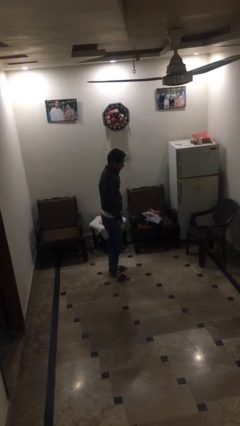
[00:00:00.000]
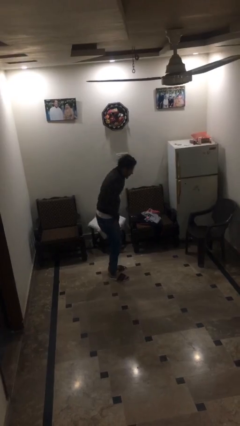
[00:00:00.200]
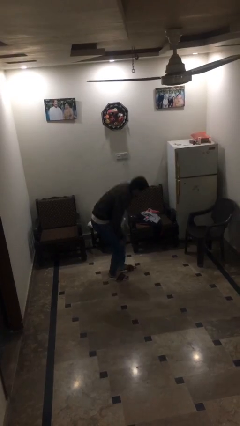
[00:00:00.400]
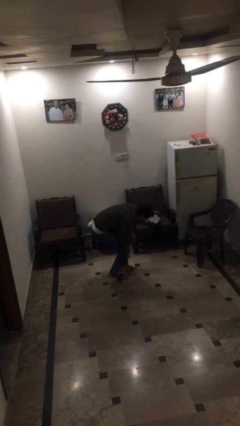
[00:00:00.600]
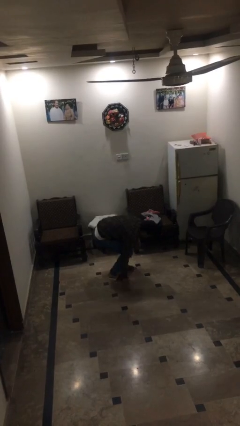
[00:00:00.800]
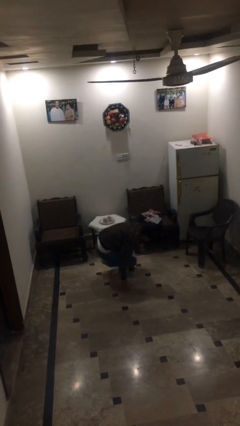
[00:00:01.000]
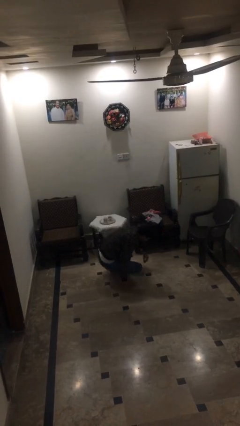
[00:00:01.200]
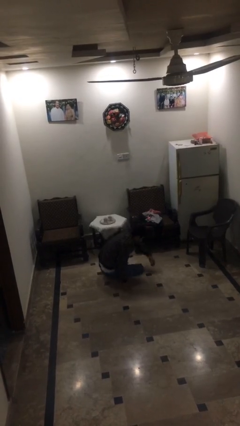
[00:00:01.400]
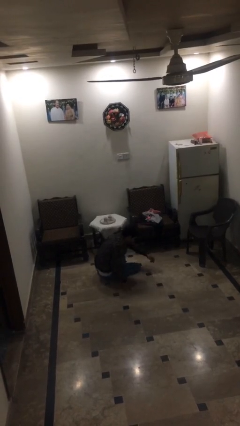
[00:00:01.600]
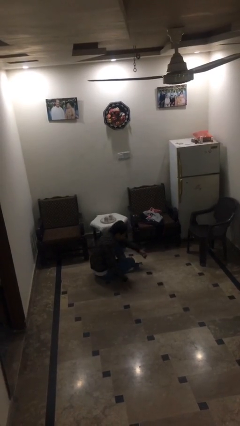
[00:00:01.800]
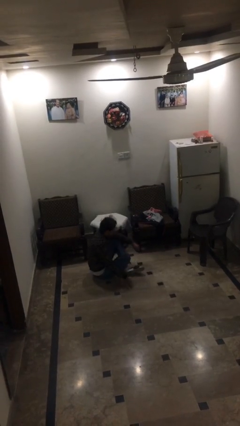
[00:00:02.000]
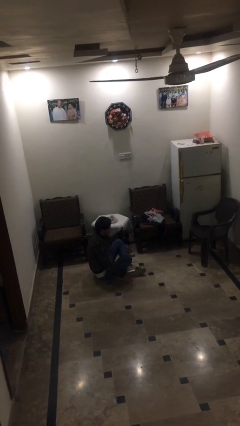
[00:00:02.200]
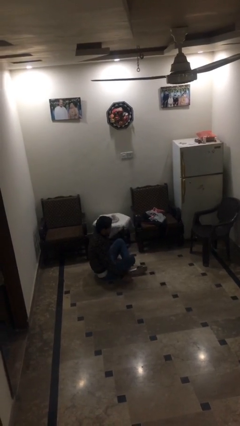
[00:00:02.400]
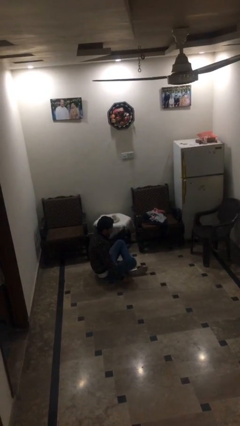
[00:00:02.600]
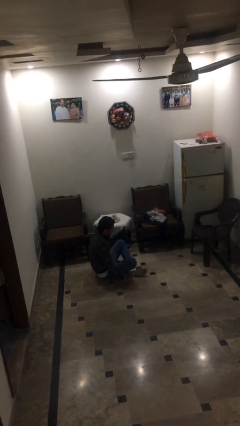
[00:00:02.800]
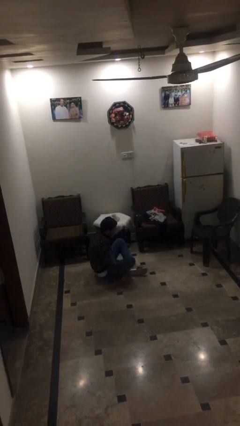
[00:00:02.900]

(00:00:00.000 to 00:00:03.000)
person sits down

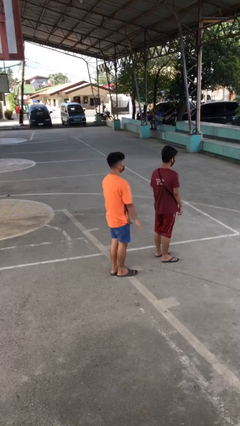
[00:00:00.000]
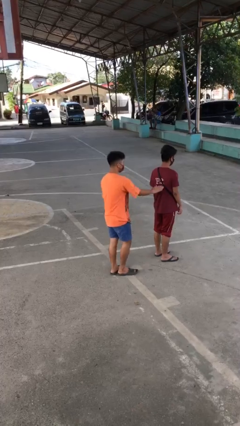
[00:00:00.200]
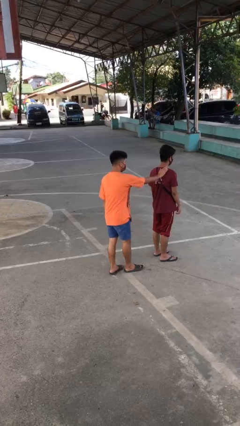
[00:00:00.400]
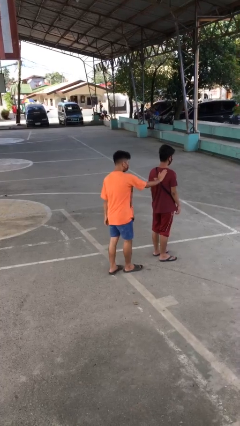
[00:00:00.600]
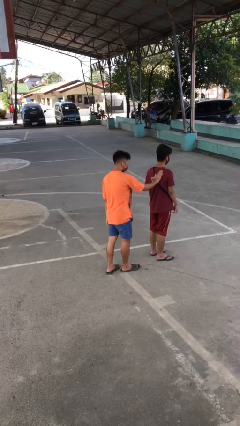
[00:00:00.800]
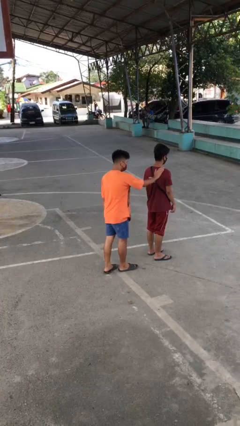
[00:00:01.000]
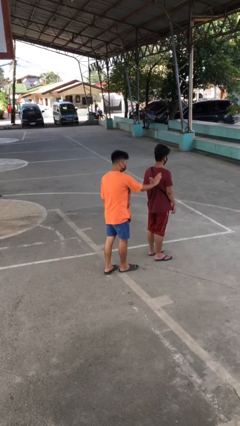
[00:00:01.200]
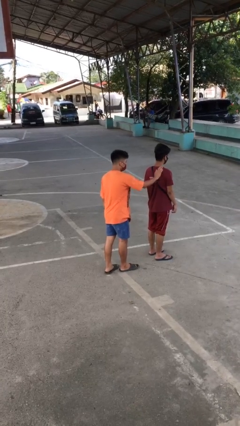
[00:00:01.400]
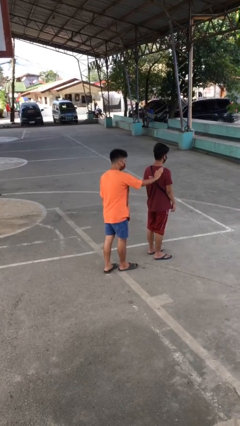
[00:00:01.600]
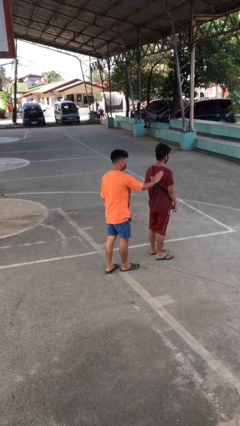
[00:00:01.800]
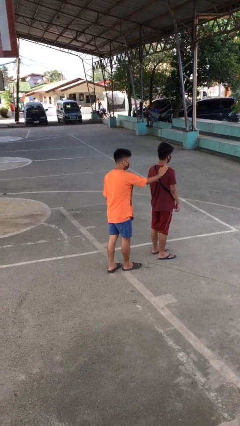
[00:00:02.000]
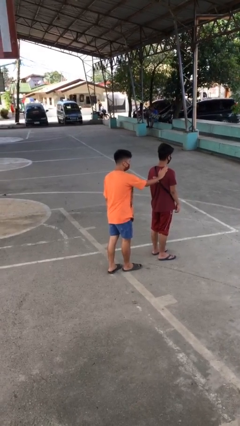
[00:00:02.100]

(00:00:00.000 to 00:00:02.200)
person touches back of person

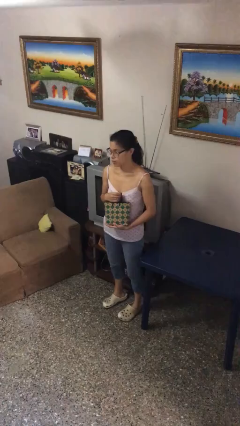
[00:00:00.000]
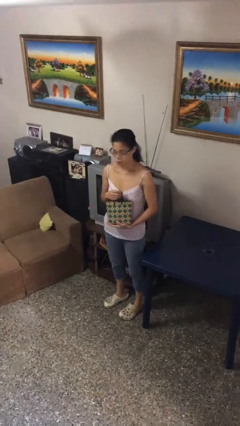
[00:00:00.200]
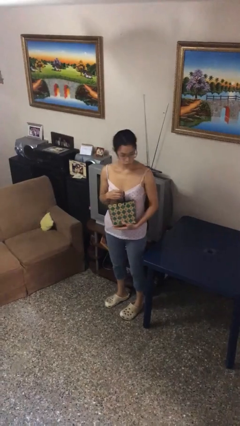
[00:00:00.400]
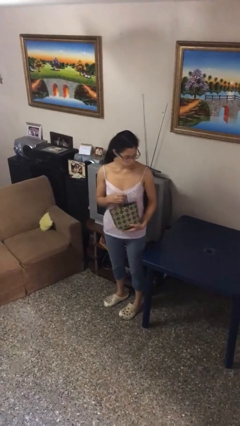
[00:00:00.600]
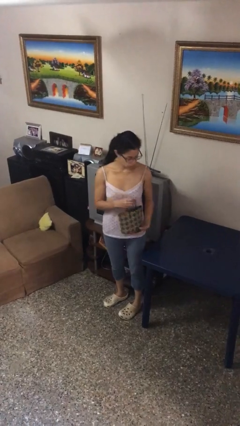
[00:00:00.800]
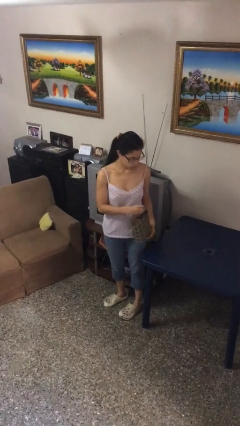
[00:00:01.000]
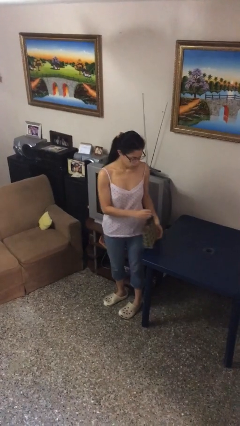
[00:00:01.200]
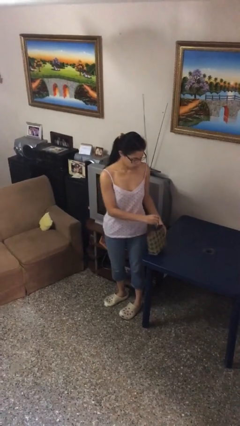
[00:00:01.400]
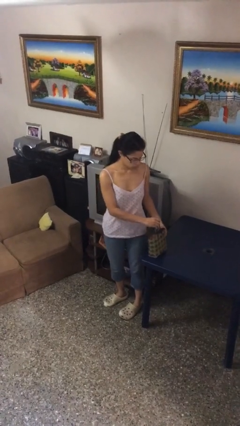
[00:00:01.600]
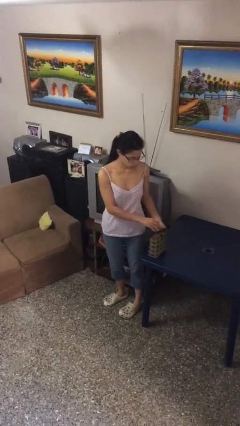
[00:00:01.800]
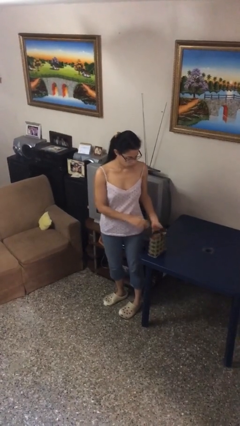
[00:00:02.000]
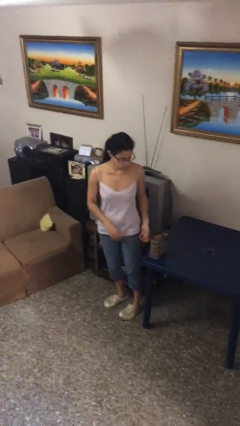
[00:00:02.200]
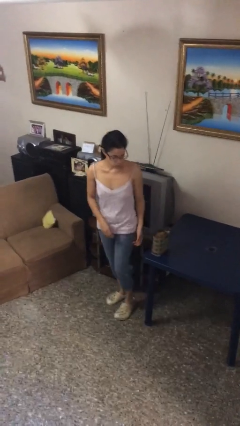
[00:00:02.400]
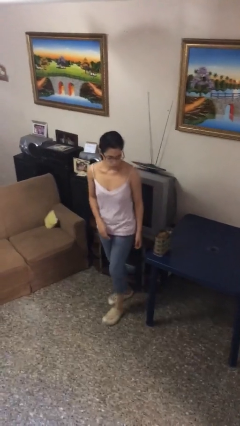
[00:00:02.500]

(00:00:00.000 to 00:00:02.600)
person puts down object on table

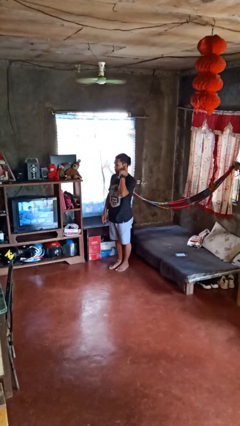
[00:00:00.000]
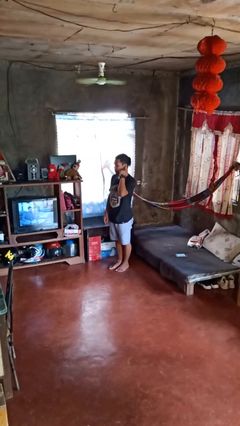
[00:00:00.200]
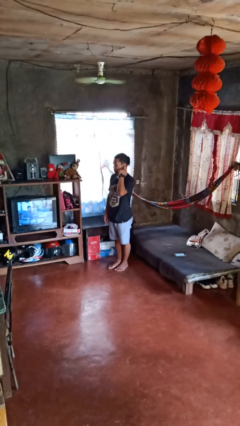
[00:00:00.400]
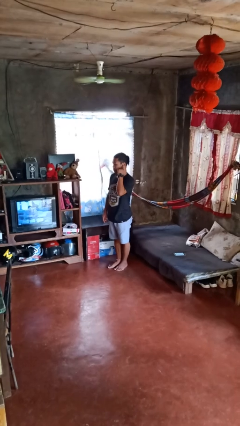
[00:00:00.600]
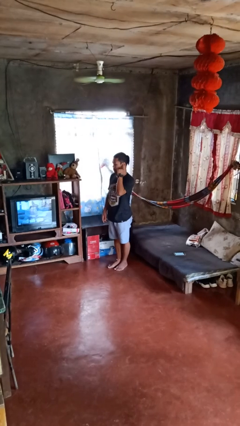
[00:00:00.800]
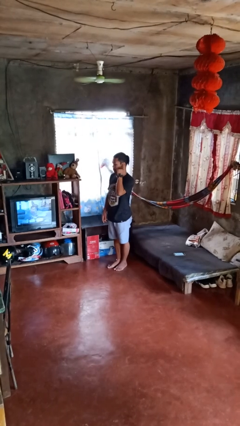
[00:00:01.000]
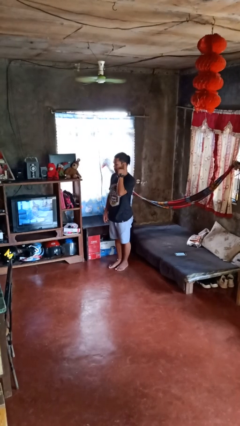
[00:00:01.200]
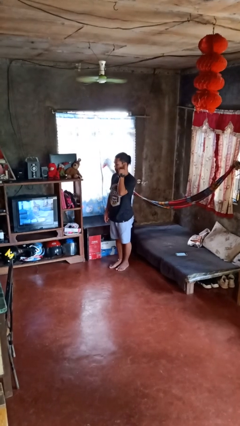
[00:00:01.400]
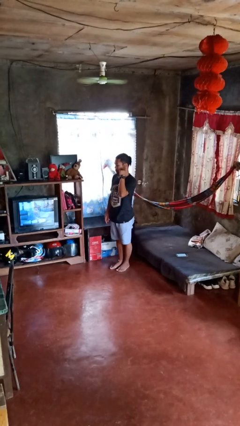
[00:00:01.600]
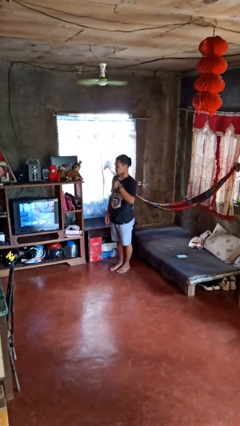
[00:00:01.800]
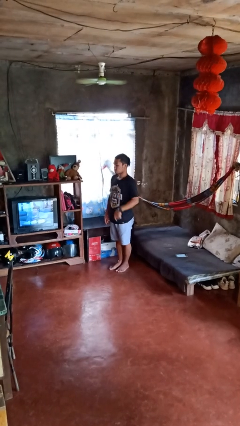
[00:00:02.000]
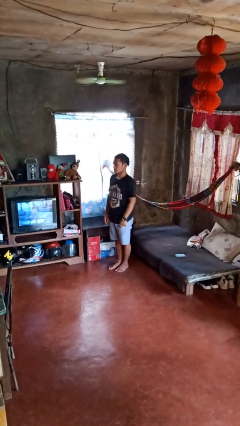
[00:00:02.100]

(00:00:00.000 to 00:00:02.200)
person gestures listen closely

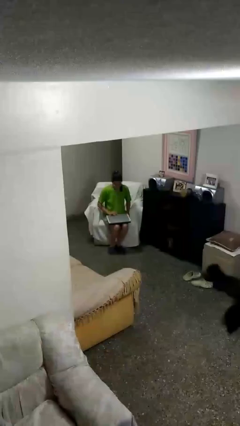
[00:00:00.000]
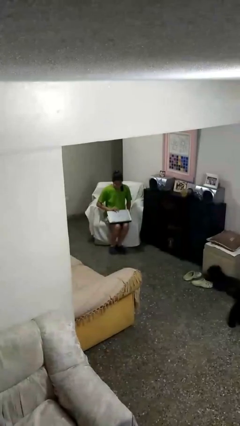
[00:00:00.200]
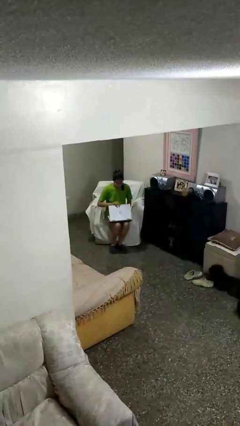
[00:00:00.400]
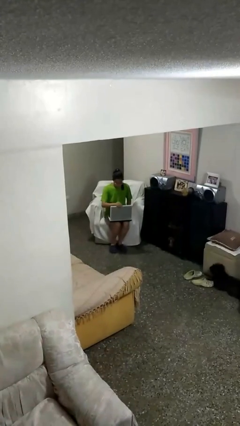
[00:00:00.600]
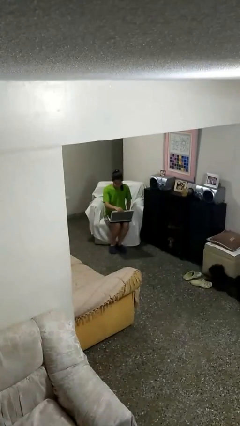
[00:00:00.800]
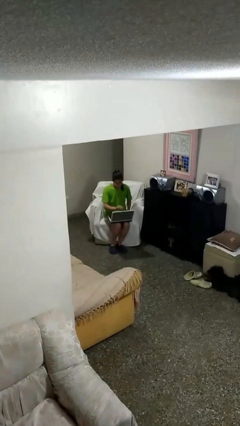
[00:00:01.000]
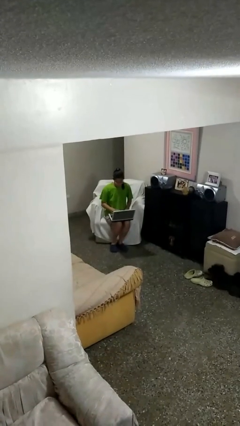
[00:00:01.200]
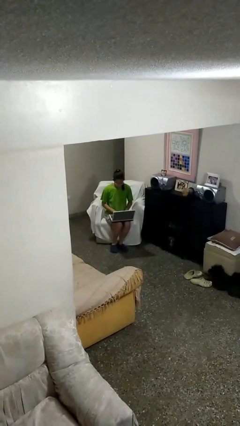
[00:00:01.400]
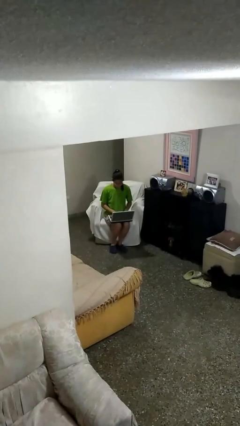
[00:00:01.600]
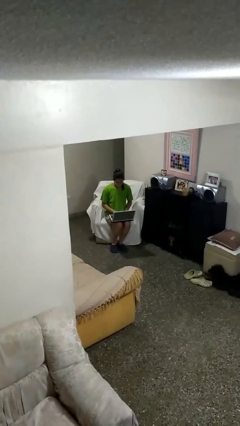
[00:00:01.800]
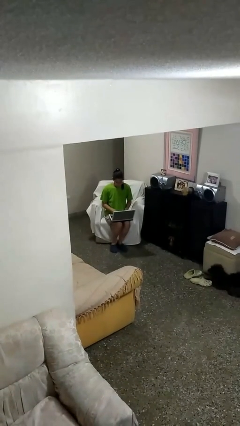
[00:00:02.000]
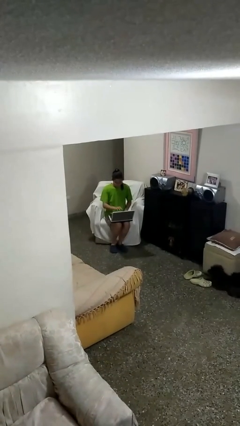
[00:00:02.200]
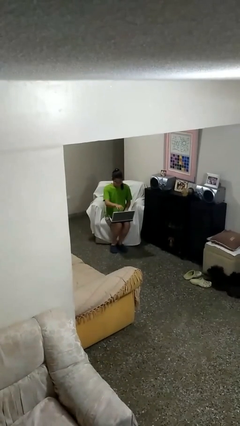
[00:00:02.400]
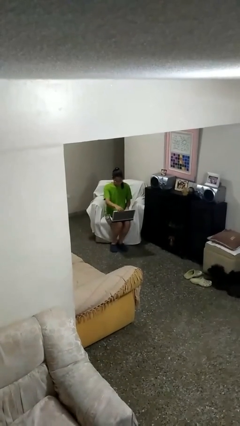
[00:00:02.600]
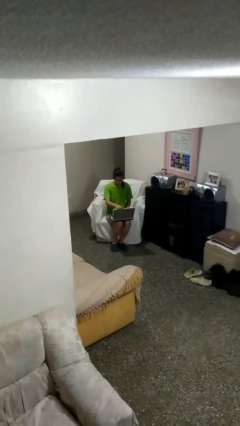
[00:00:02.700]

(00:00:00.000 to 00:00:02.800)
person interacts with laptop

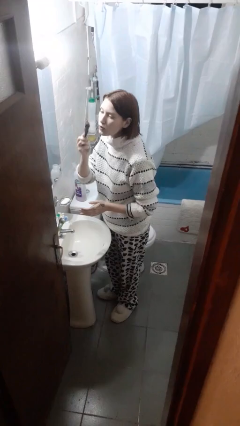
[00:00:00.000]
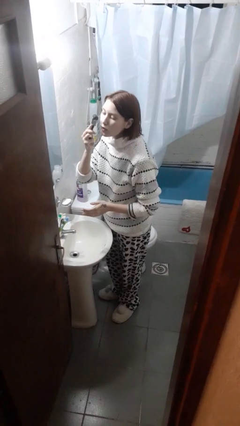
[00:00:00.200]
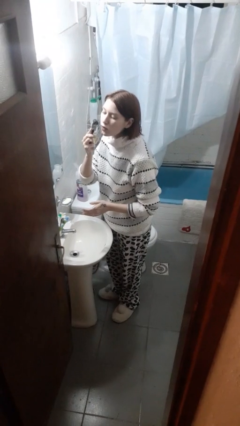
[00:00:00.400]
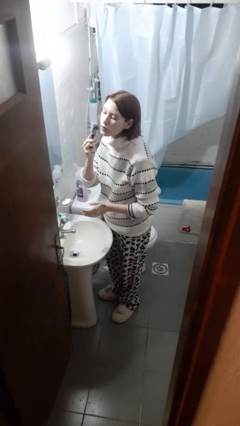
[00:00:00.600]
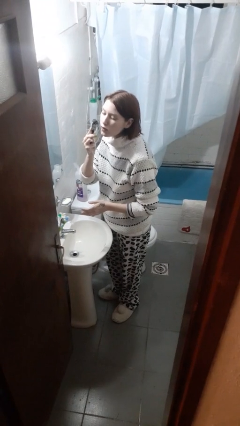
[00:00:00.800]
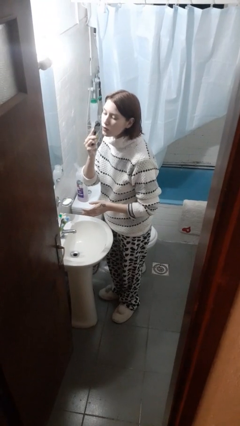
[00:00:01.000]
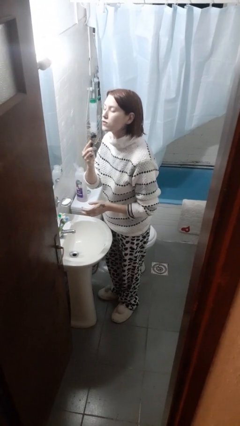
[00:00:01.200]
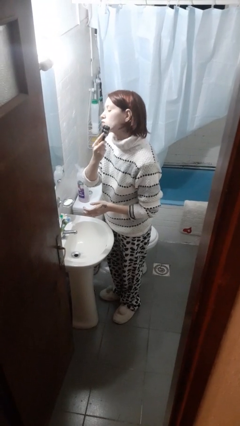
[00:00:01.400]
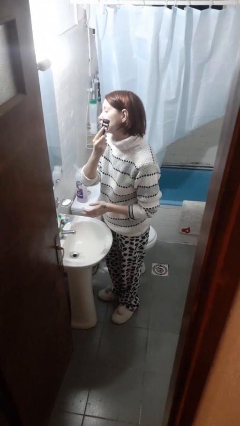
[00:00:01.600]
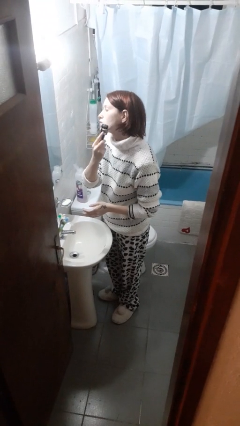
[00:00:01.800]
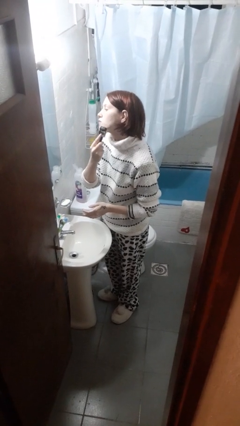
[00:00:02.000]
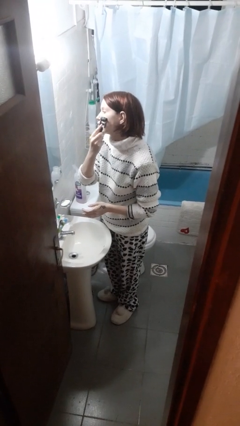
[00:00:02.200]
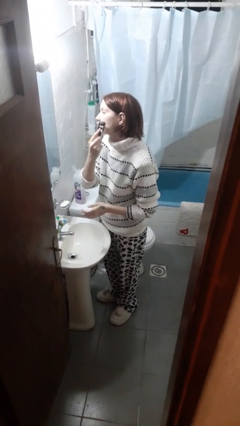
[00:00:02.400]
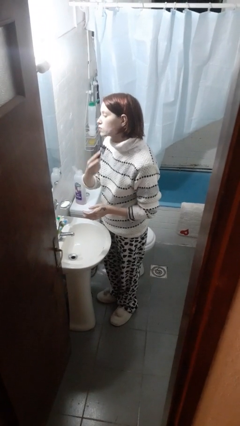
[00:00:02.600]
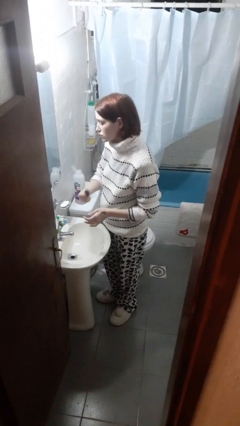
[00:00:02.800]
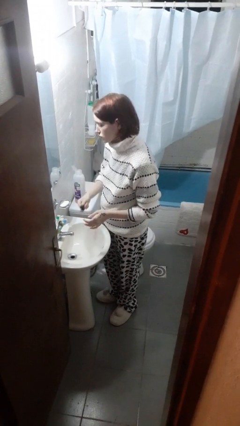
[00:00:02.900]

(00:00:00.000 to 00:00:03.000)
person shaves face

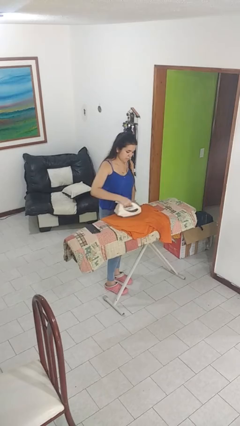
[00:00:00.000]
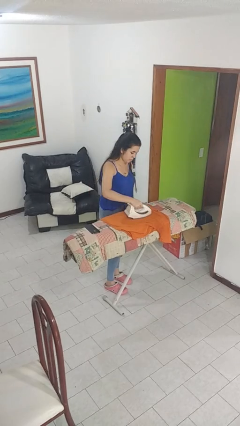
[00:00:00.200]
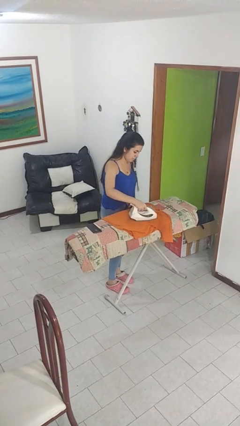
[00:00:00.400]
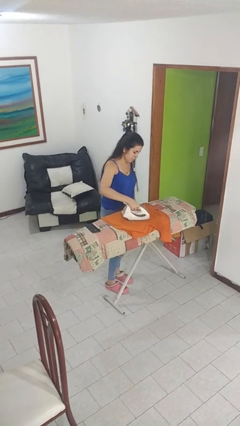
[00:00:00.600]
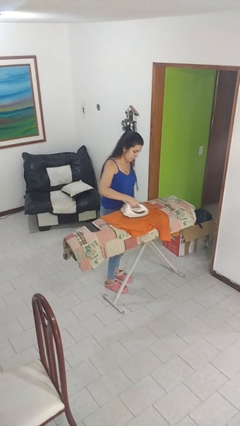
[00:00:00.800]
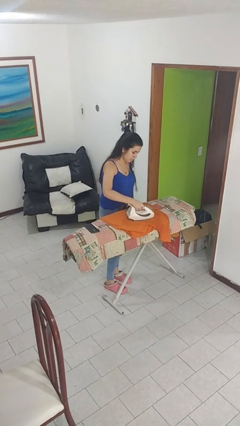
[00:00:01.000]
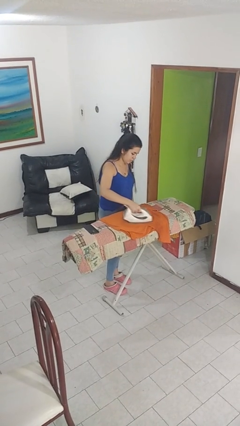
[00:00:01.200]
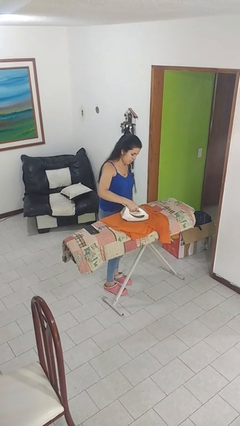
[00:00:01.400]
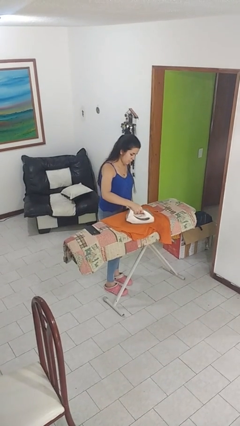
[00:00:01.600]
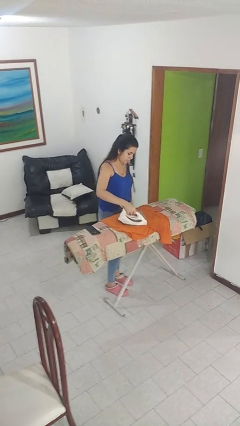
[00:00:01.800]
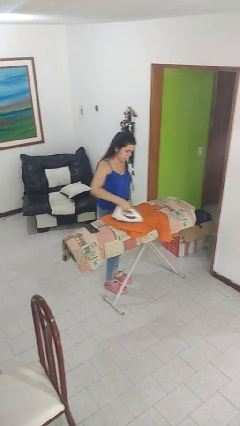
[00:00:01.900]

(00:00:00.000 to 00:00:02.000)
person irons clothes
